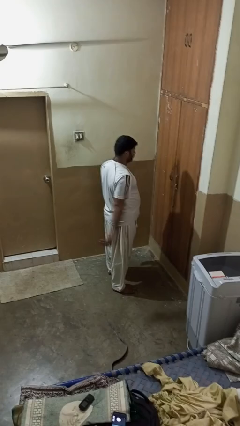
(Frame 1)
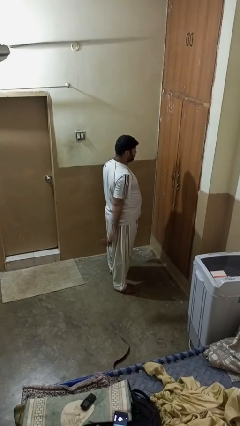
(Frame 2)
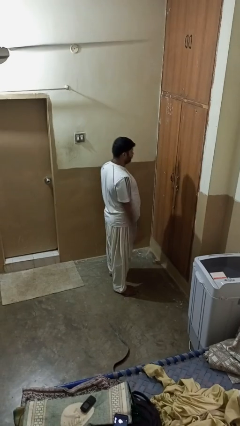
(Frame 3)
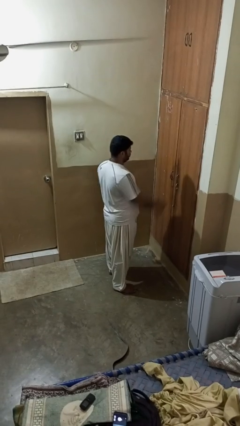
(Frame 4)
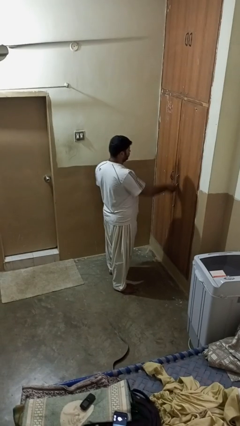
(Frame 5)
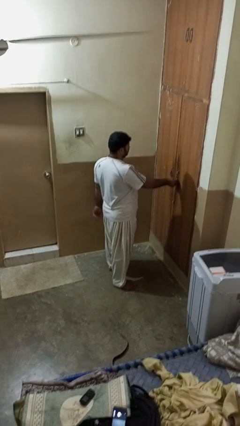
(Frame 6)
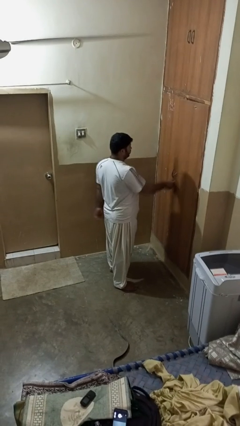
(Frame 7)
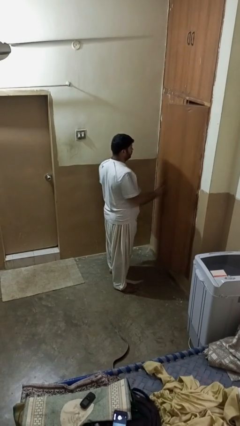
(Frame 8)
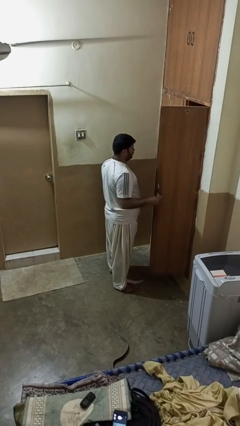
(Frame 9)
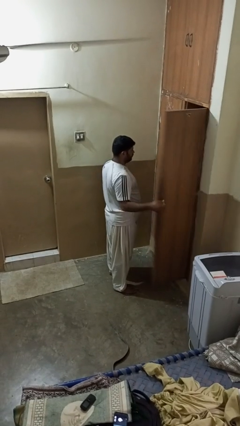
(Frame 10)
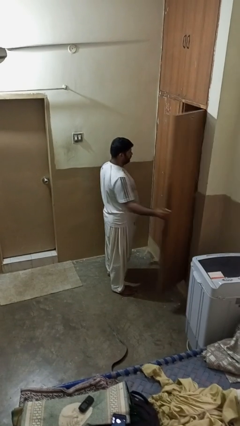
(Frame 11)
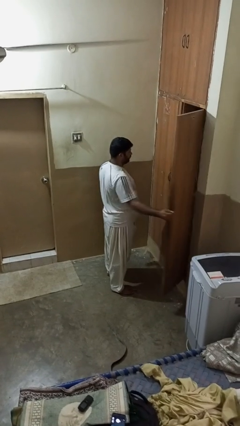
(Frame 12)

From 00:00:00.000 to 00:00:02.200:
person opens closet door

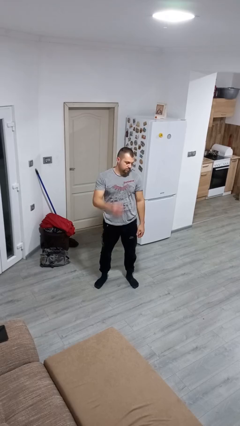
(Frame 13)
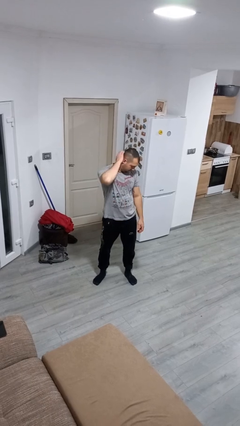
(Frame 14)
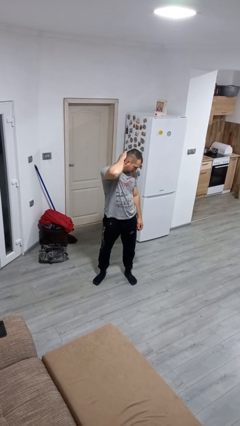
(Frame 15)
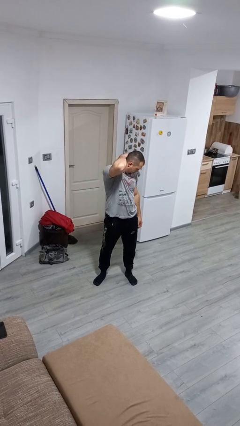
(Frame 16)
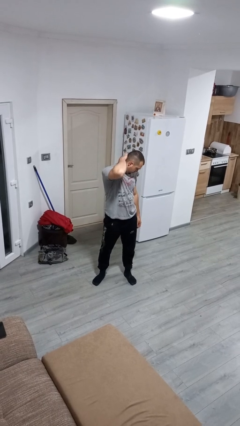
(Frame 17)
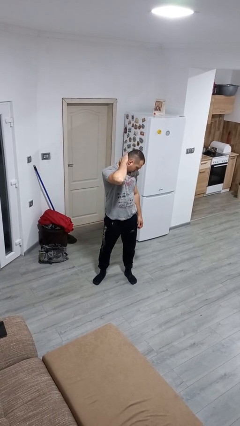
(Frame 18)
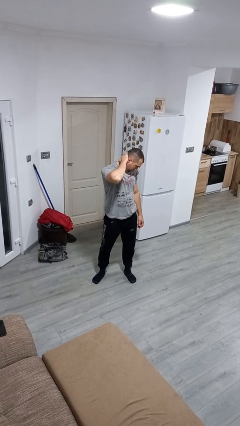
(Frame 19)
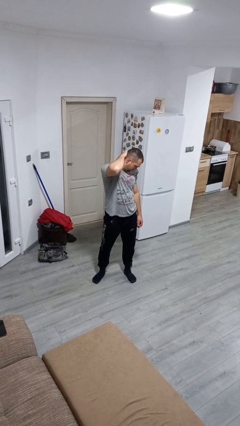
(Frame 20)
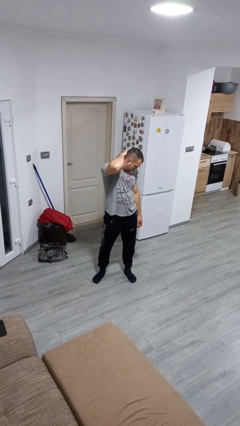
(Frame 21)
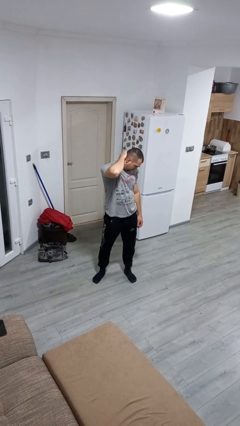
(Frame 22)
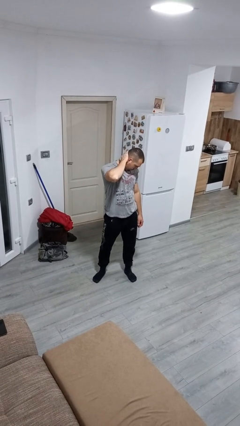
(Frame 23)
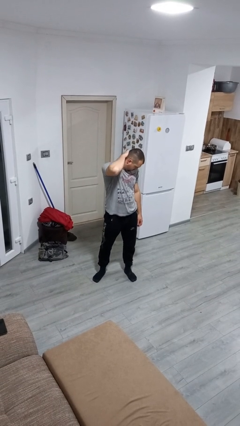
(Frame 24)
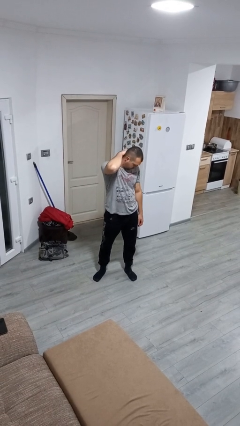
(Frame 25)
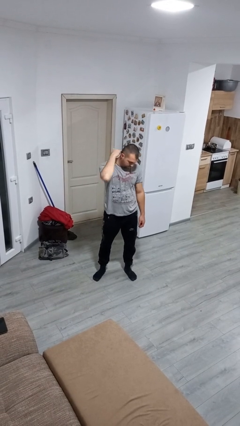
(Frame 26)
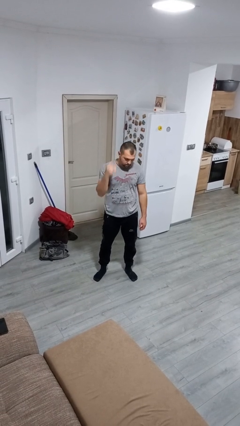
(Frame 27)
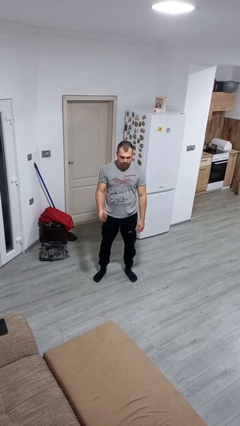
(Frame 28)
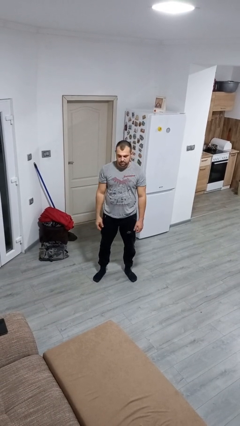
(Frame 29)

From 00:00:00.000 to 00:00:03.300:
person rubs neck

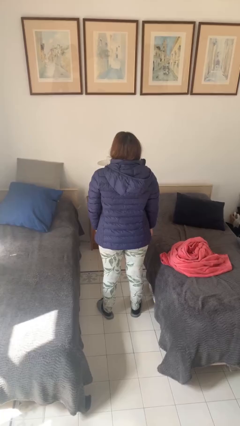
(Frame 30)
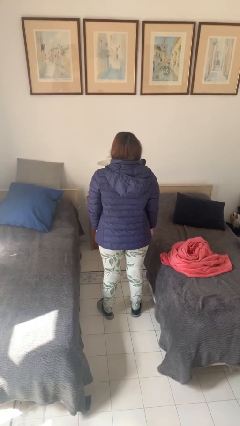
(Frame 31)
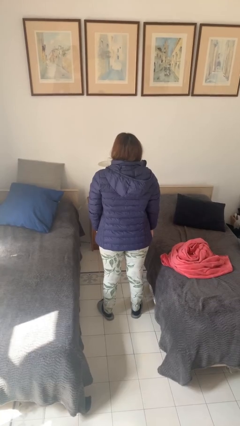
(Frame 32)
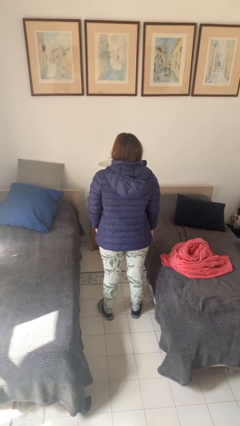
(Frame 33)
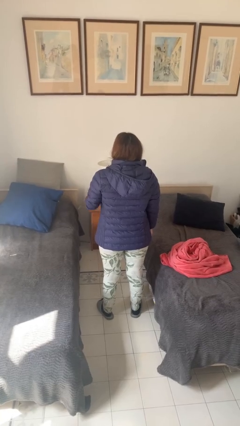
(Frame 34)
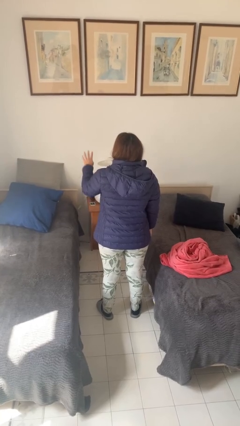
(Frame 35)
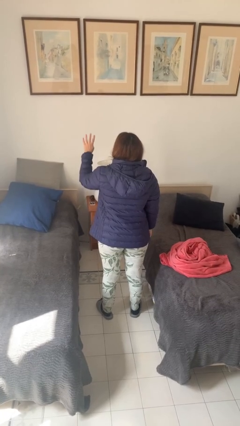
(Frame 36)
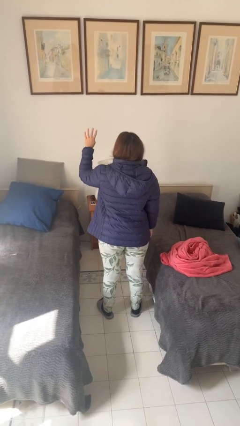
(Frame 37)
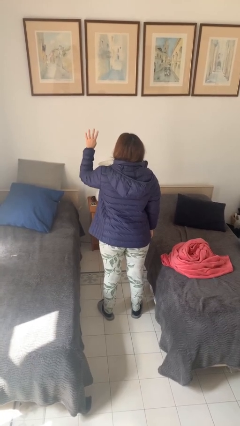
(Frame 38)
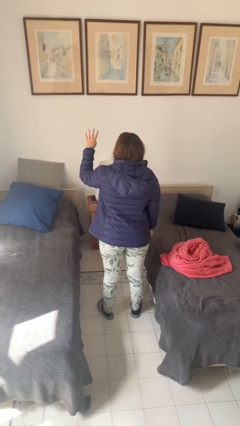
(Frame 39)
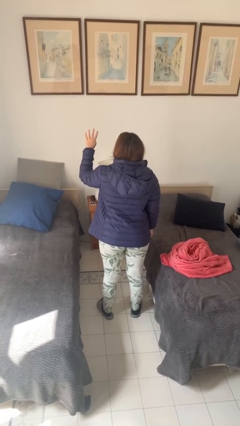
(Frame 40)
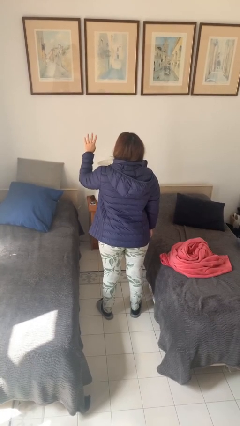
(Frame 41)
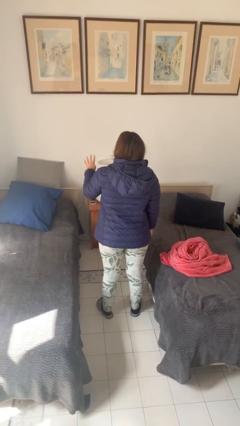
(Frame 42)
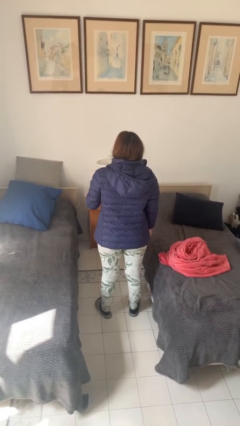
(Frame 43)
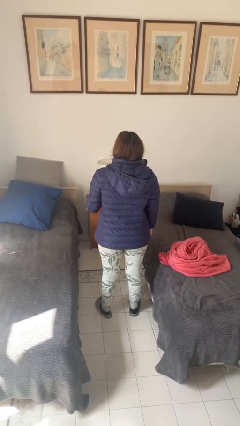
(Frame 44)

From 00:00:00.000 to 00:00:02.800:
person gestures number four

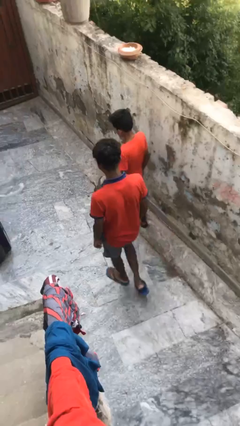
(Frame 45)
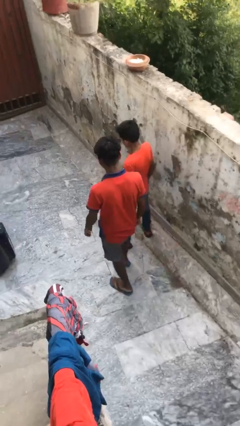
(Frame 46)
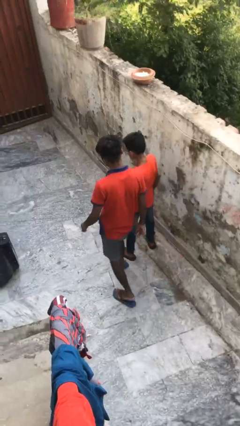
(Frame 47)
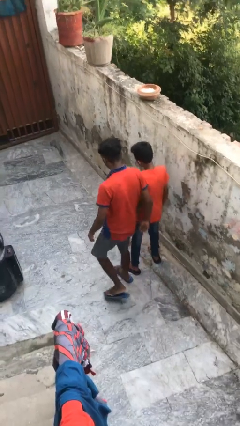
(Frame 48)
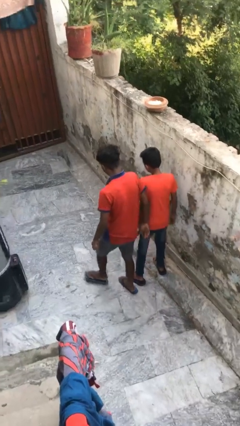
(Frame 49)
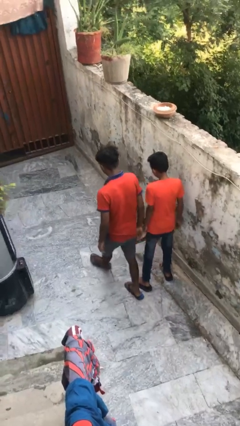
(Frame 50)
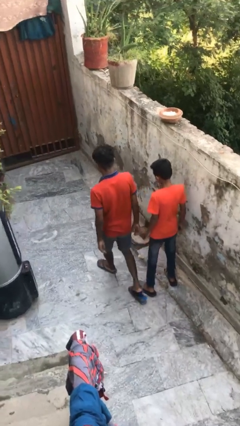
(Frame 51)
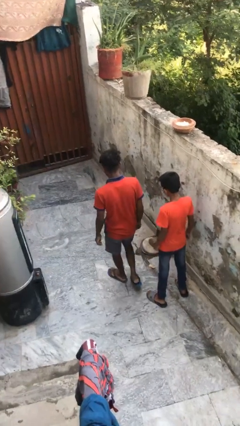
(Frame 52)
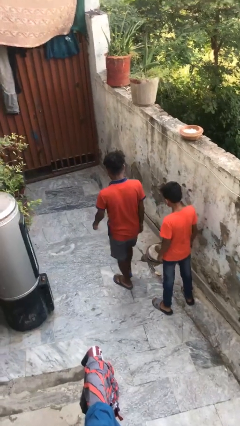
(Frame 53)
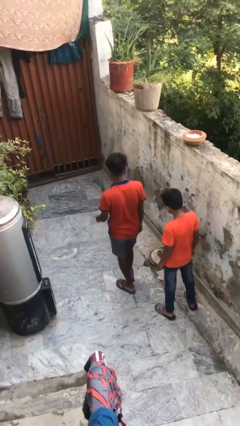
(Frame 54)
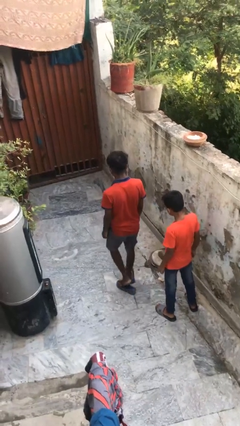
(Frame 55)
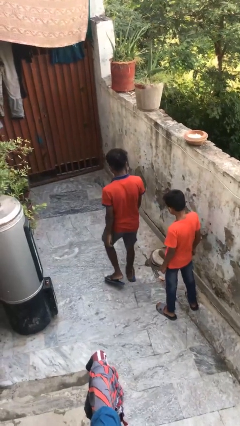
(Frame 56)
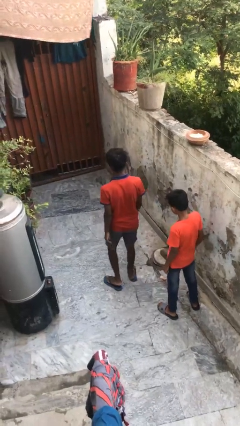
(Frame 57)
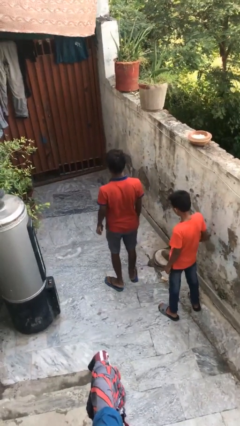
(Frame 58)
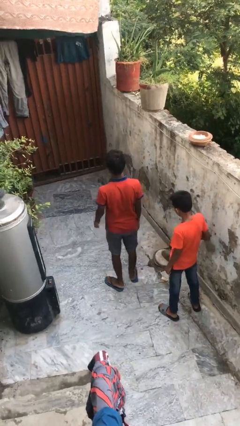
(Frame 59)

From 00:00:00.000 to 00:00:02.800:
person bumps into person

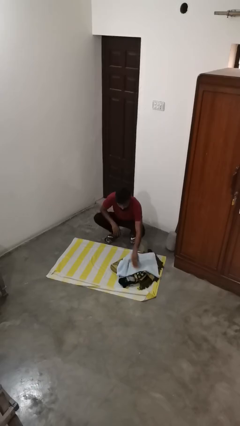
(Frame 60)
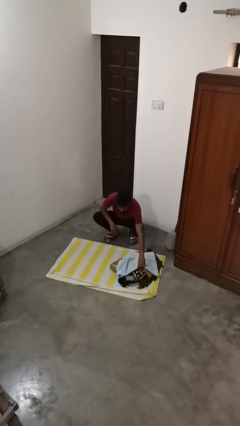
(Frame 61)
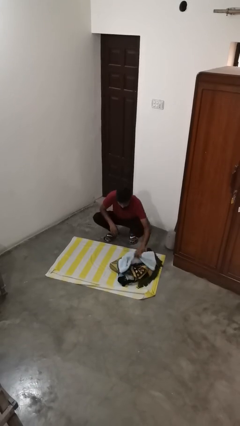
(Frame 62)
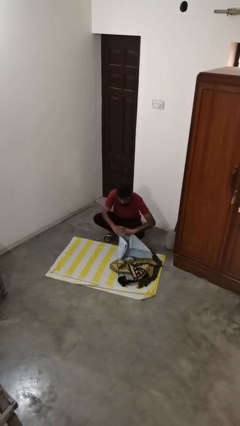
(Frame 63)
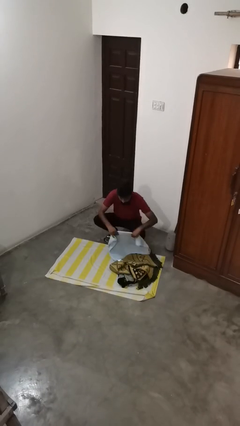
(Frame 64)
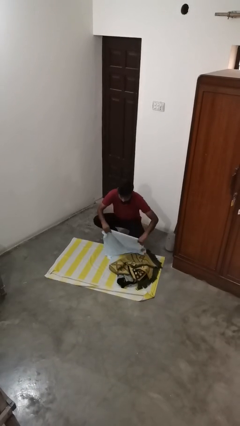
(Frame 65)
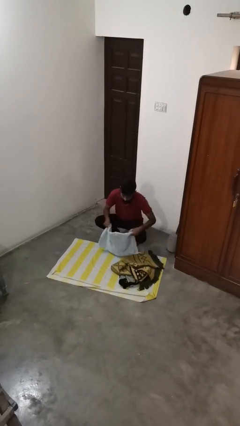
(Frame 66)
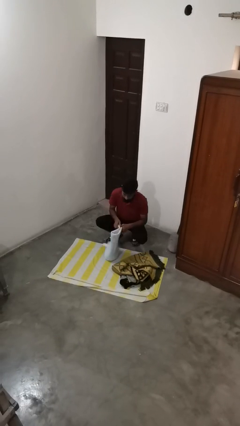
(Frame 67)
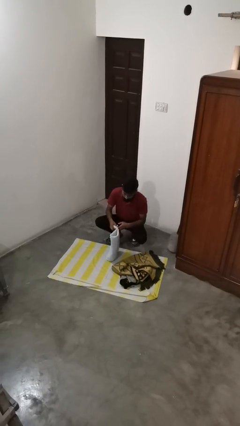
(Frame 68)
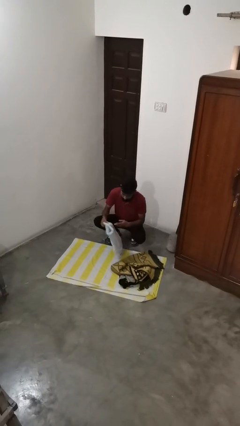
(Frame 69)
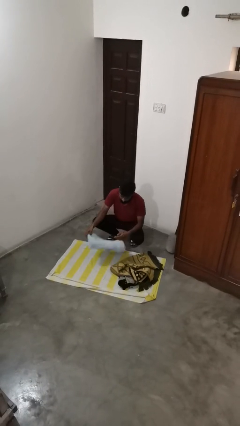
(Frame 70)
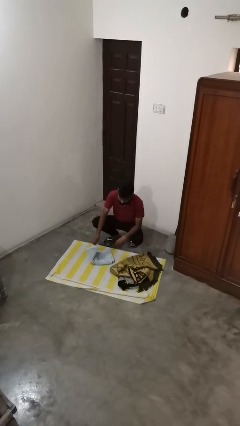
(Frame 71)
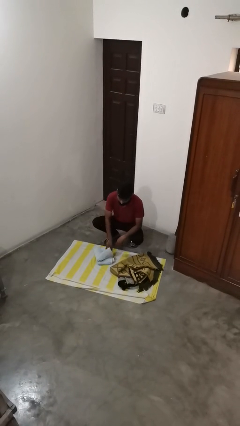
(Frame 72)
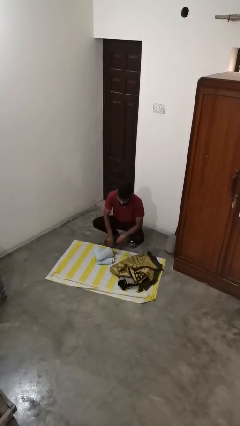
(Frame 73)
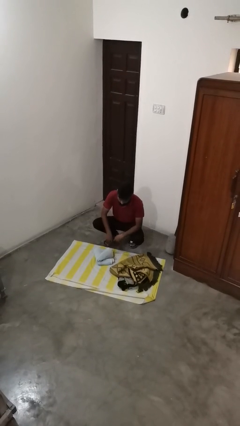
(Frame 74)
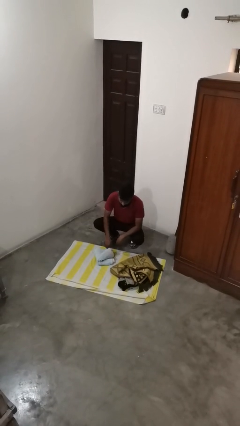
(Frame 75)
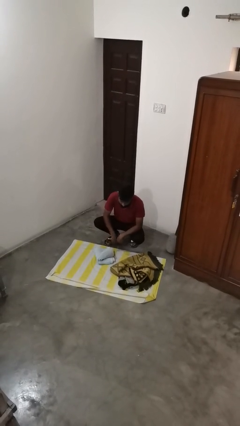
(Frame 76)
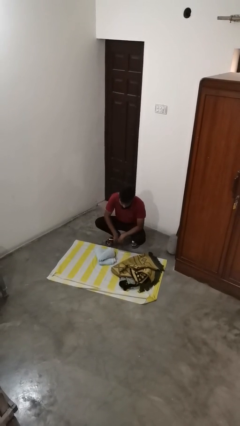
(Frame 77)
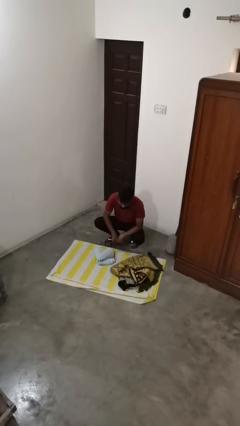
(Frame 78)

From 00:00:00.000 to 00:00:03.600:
person folds towel

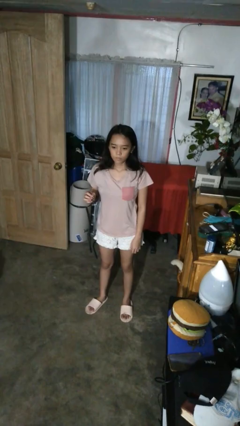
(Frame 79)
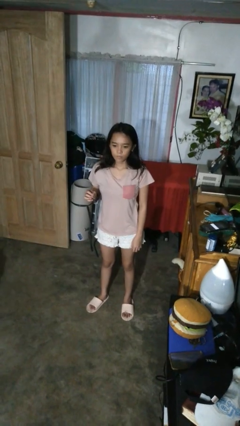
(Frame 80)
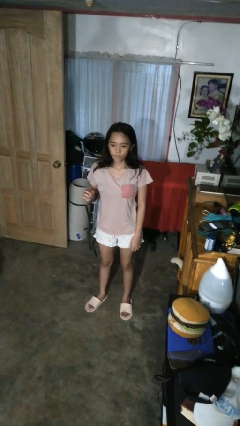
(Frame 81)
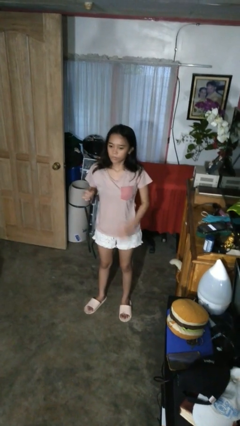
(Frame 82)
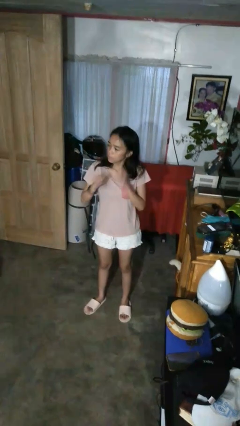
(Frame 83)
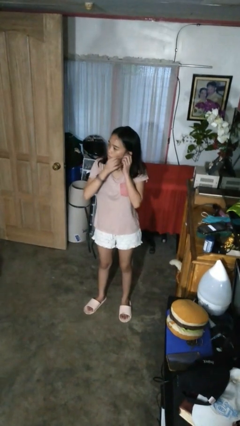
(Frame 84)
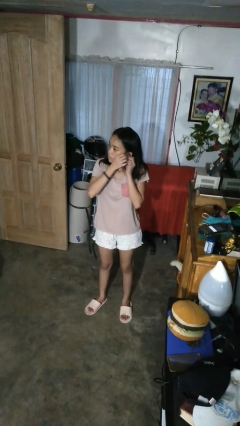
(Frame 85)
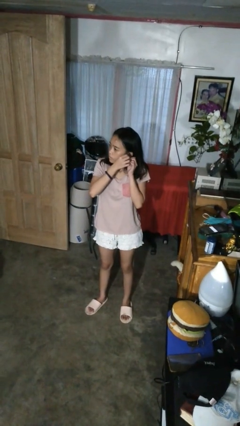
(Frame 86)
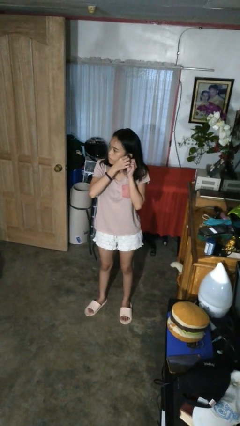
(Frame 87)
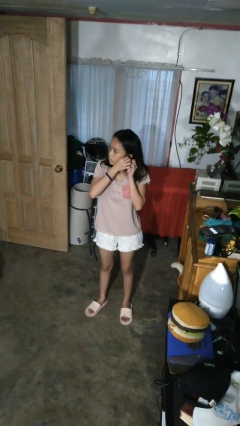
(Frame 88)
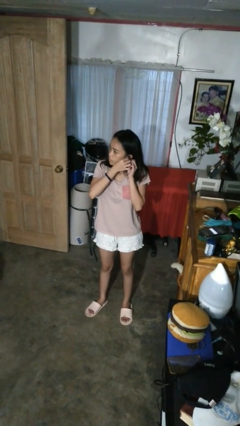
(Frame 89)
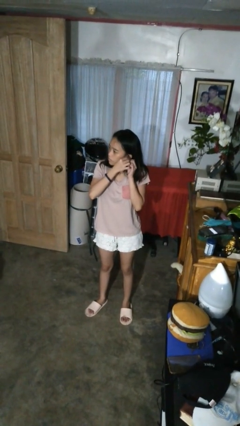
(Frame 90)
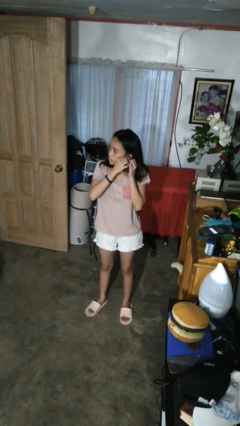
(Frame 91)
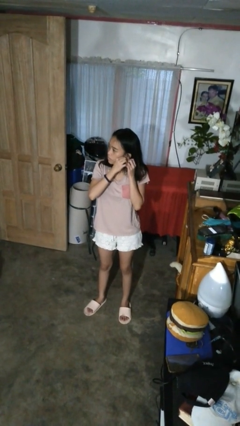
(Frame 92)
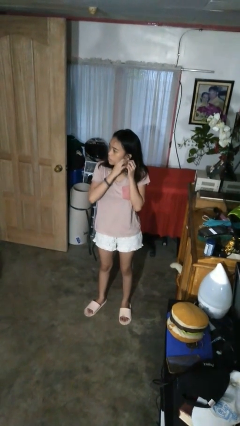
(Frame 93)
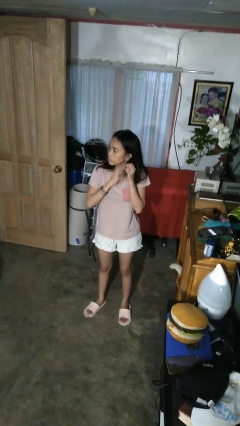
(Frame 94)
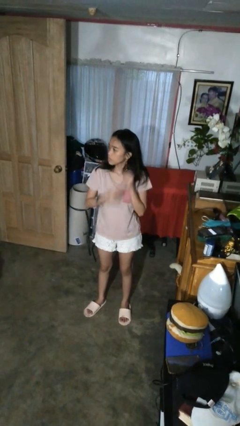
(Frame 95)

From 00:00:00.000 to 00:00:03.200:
person puts on earrings
